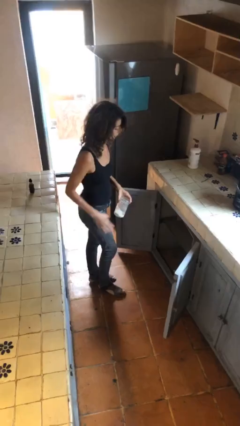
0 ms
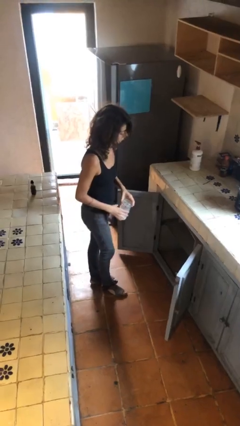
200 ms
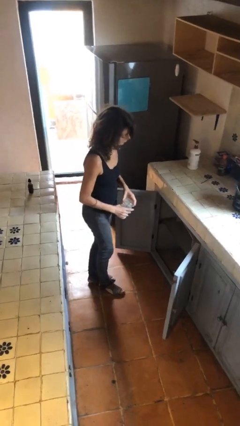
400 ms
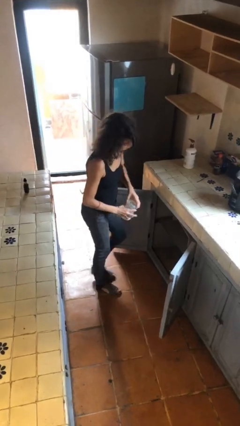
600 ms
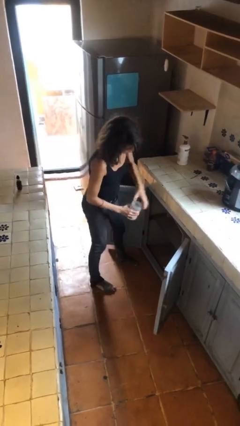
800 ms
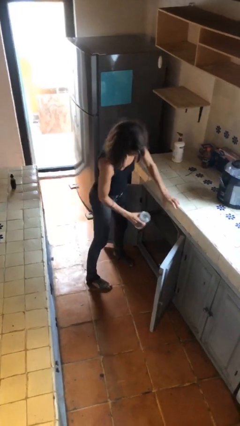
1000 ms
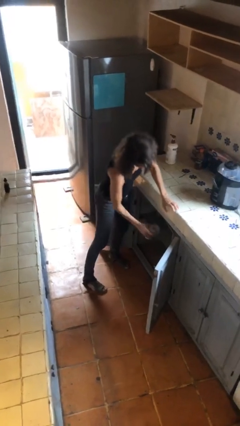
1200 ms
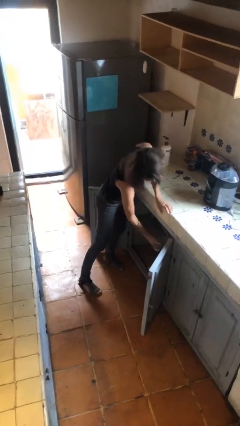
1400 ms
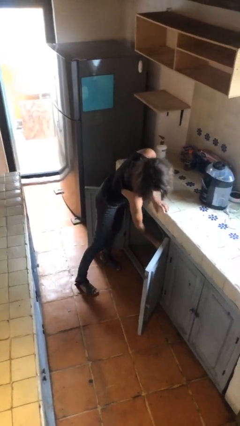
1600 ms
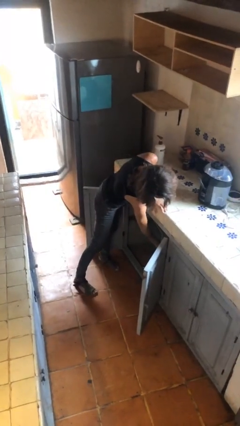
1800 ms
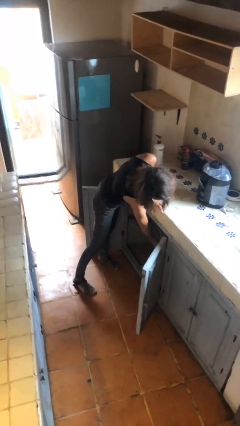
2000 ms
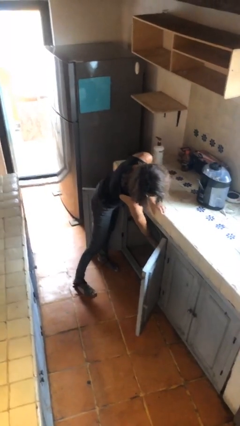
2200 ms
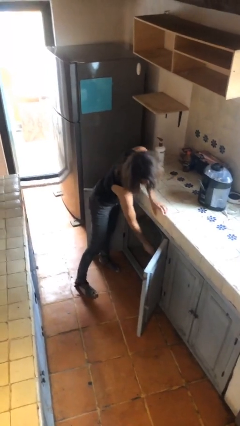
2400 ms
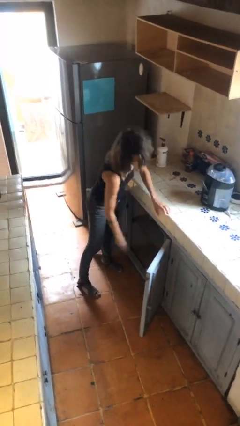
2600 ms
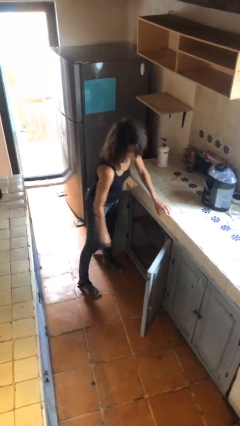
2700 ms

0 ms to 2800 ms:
person puts down object into cabinet

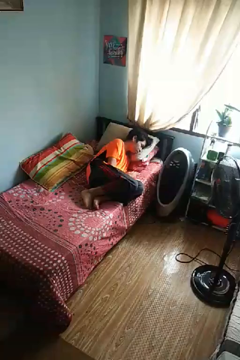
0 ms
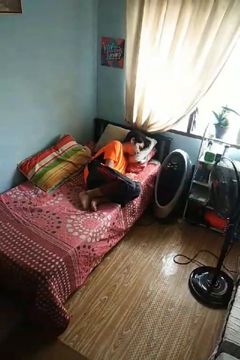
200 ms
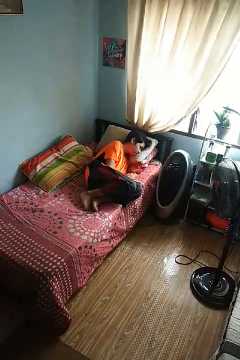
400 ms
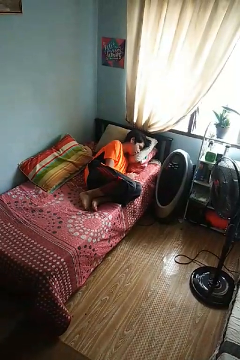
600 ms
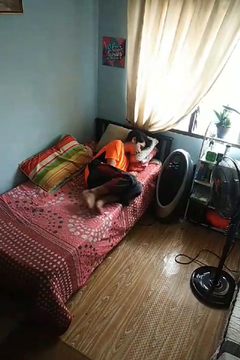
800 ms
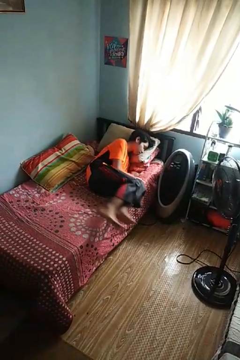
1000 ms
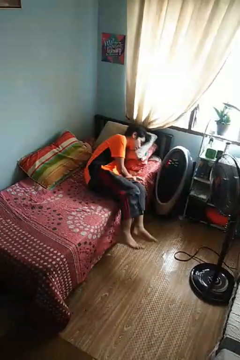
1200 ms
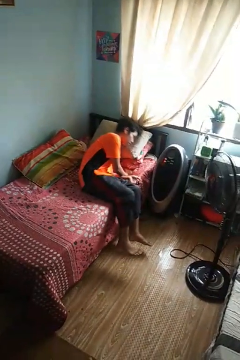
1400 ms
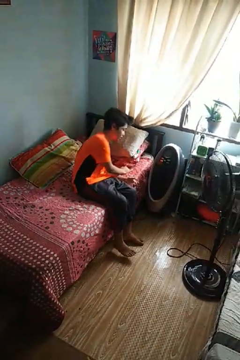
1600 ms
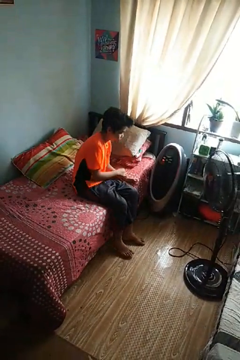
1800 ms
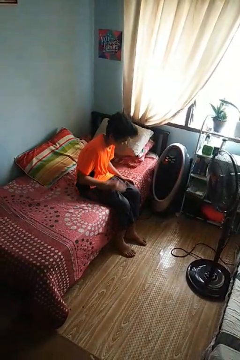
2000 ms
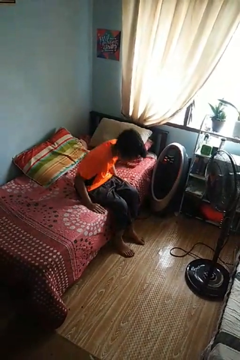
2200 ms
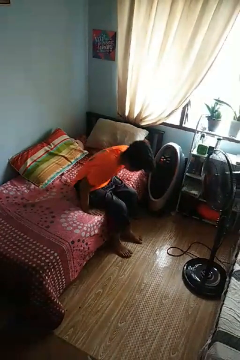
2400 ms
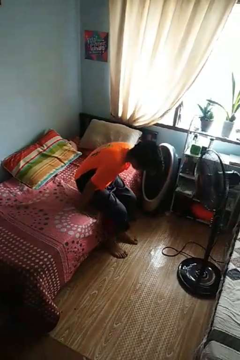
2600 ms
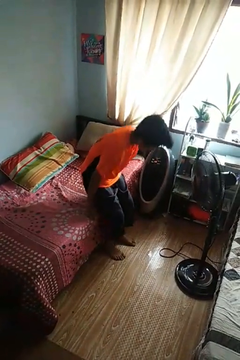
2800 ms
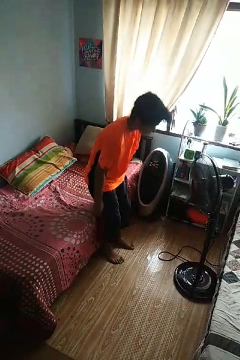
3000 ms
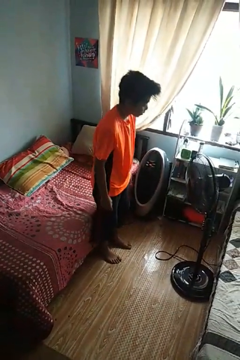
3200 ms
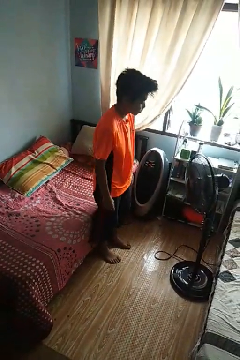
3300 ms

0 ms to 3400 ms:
person stands up

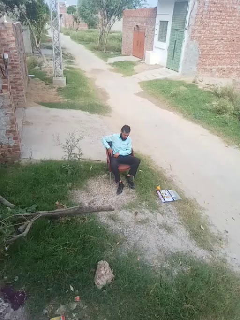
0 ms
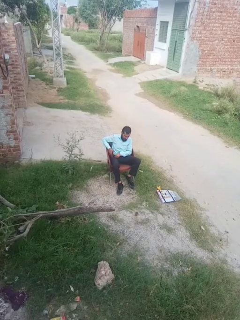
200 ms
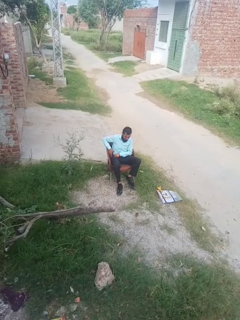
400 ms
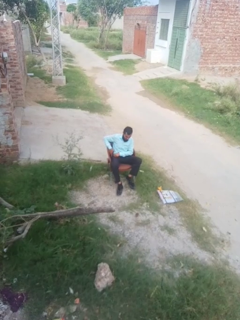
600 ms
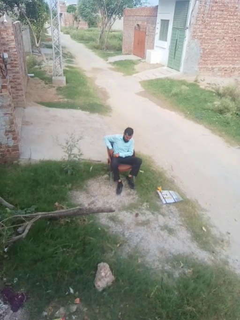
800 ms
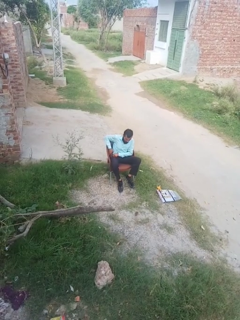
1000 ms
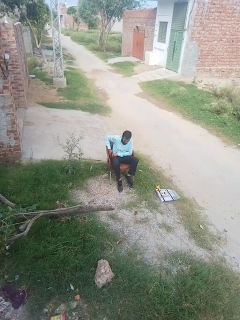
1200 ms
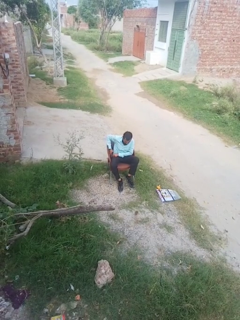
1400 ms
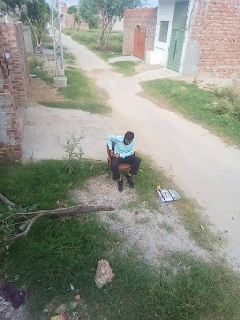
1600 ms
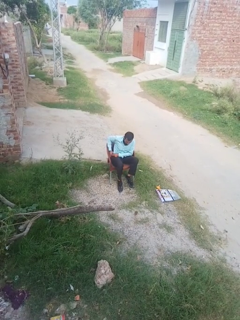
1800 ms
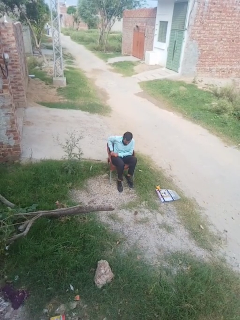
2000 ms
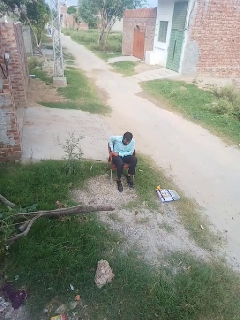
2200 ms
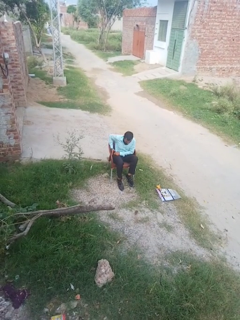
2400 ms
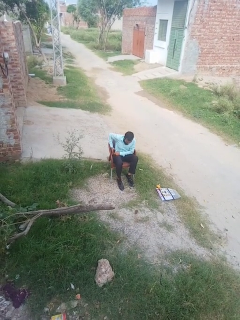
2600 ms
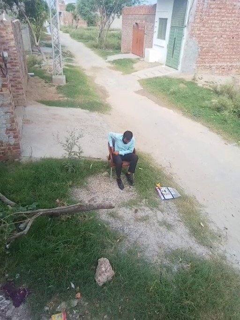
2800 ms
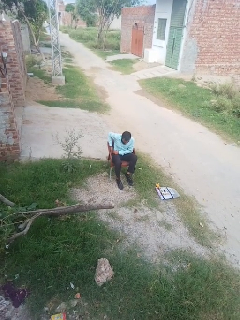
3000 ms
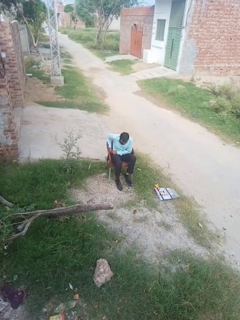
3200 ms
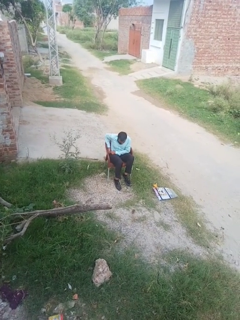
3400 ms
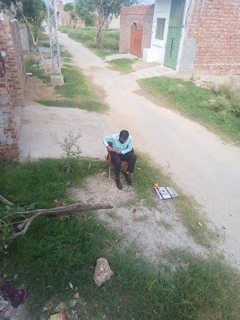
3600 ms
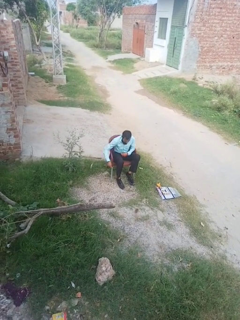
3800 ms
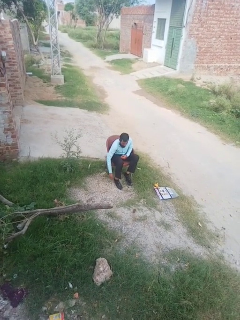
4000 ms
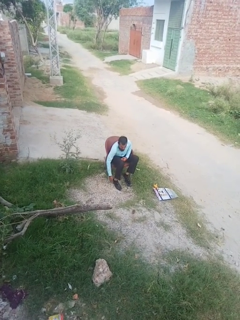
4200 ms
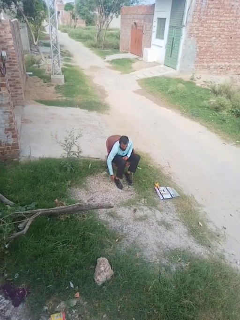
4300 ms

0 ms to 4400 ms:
person puts on shoes

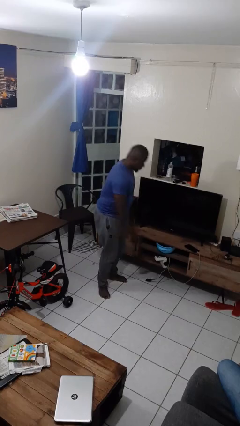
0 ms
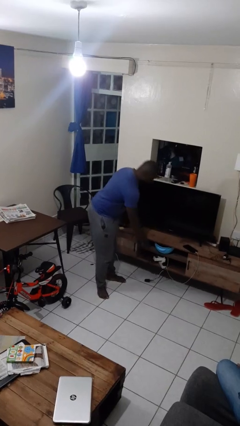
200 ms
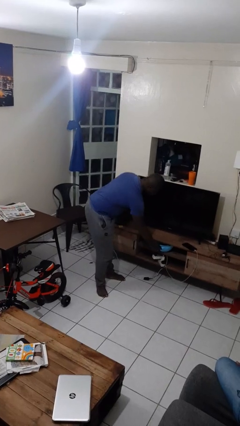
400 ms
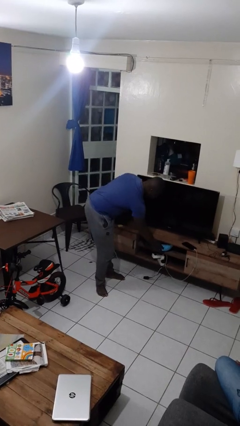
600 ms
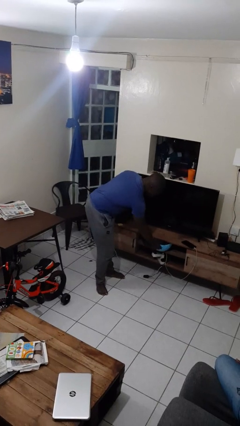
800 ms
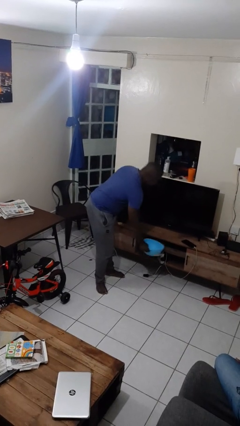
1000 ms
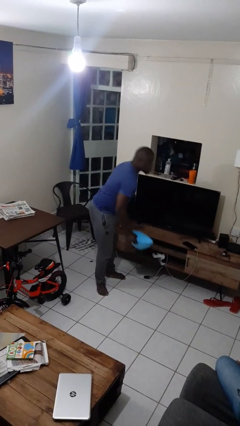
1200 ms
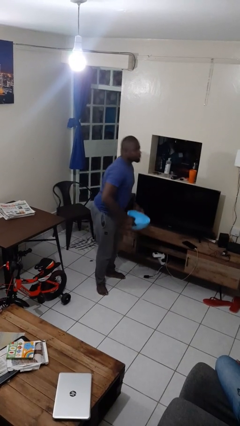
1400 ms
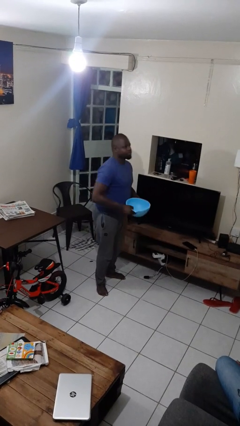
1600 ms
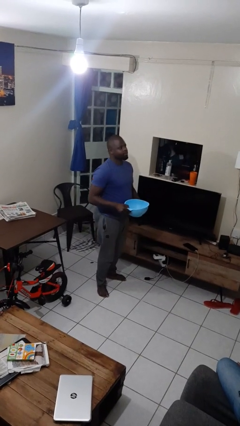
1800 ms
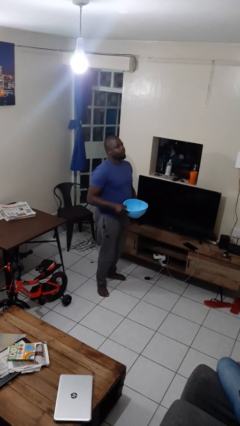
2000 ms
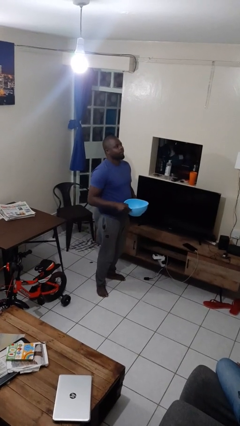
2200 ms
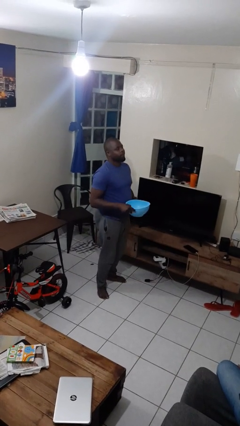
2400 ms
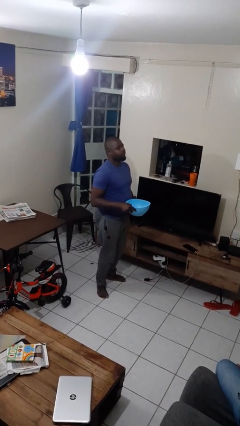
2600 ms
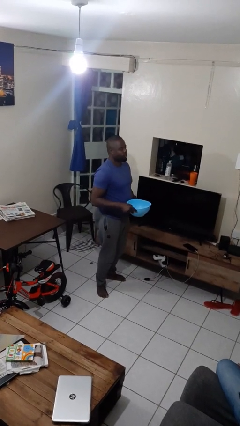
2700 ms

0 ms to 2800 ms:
person picks up object from cabinet

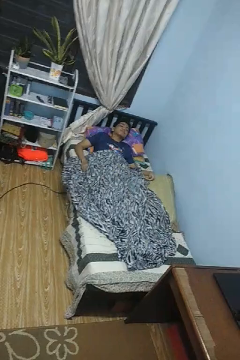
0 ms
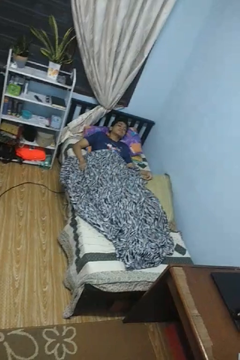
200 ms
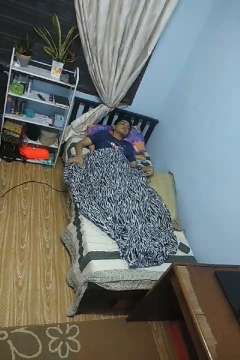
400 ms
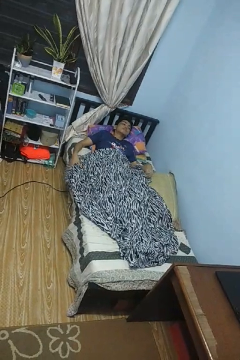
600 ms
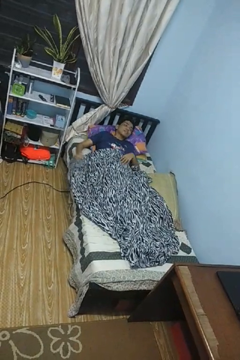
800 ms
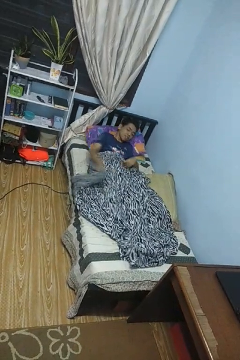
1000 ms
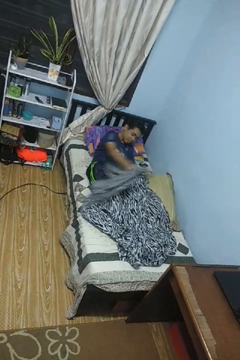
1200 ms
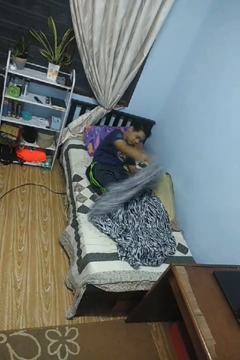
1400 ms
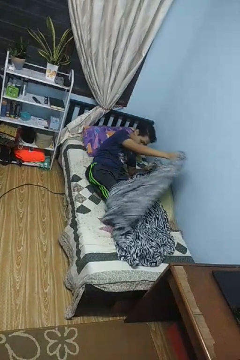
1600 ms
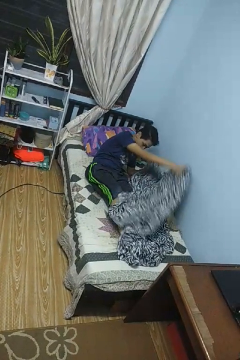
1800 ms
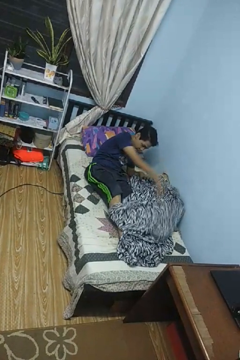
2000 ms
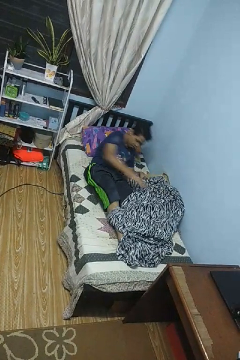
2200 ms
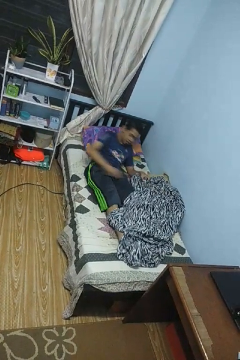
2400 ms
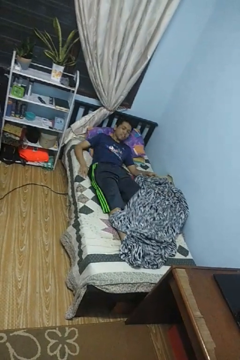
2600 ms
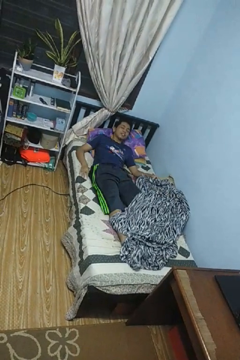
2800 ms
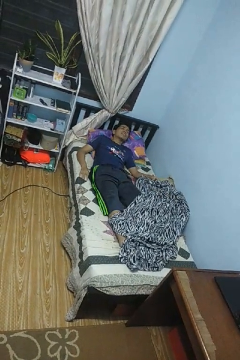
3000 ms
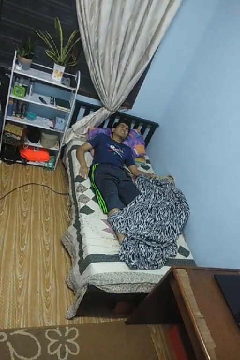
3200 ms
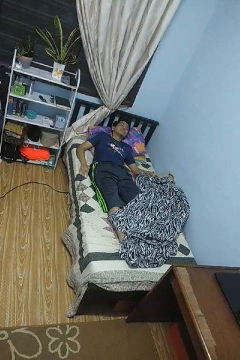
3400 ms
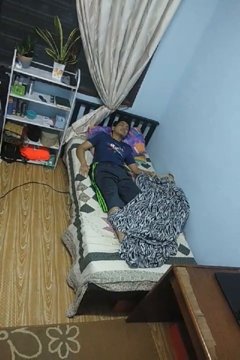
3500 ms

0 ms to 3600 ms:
person uncovers with blanket

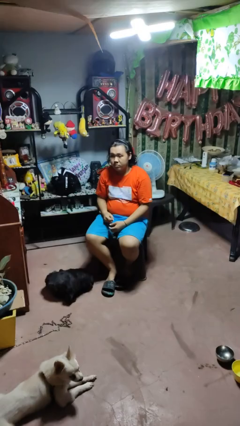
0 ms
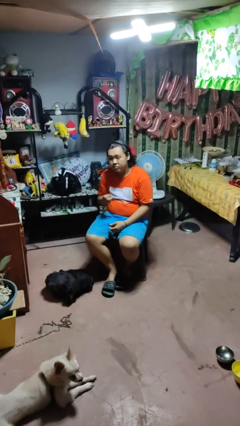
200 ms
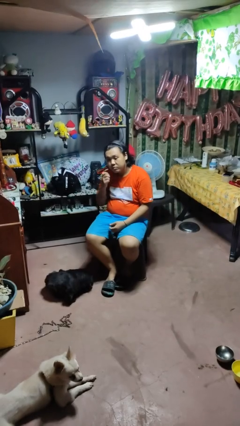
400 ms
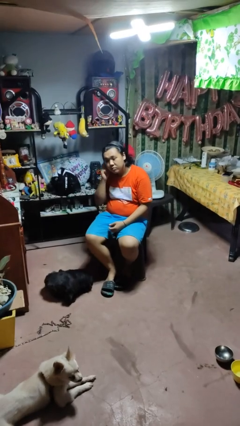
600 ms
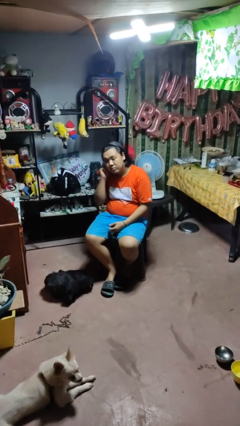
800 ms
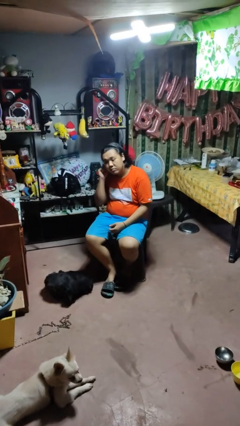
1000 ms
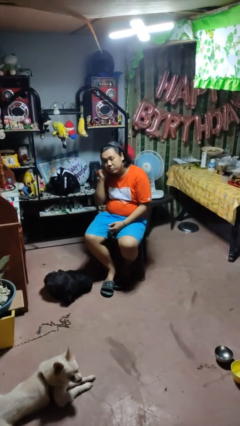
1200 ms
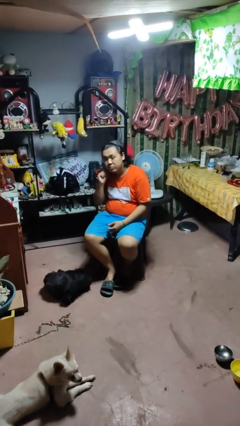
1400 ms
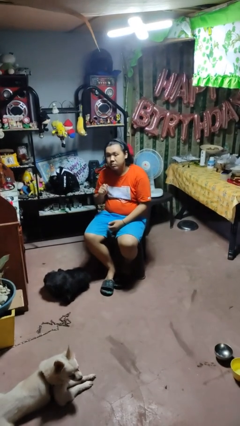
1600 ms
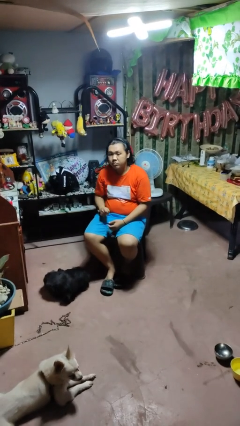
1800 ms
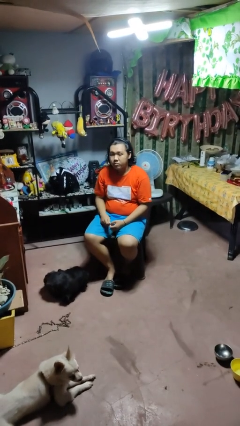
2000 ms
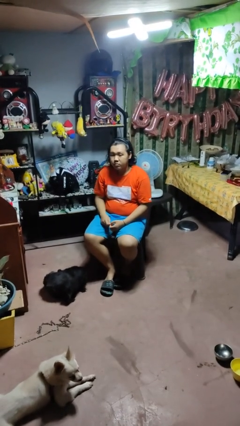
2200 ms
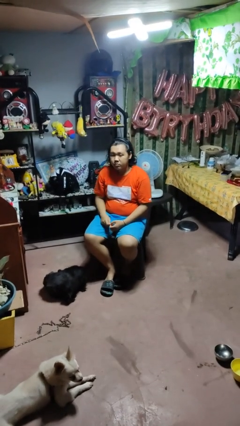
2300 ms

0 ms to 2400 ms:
person takes off earrings
